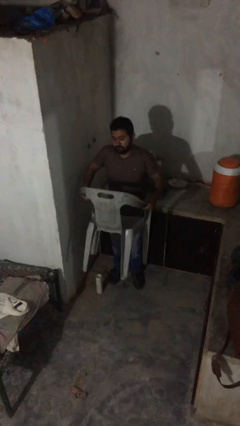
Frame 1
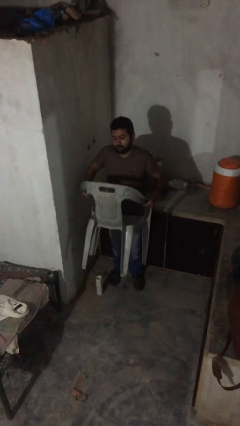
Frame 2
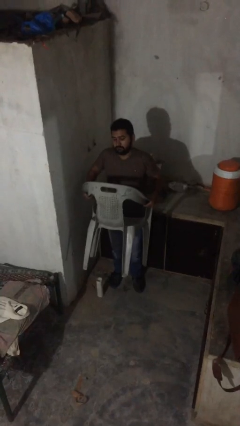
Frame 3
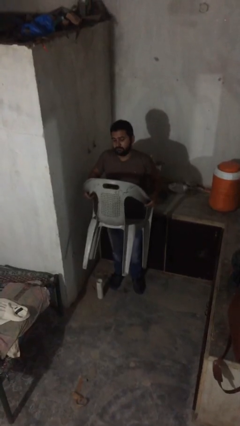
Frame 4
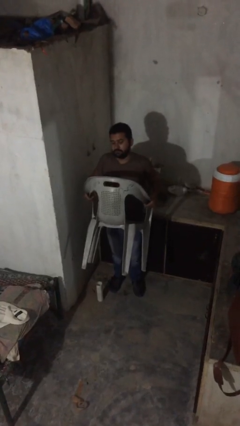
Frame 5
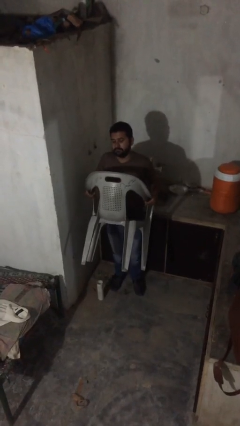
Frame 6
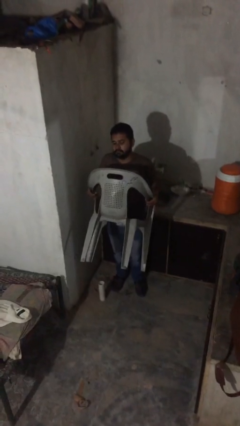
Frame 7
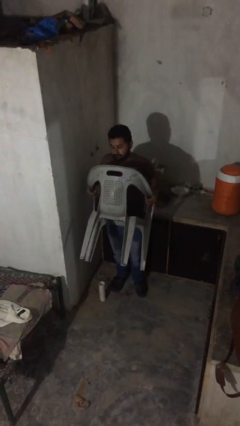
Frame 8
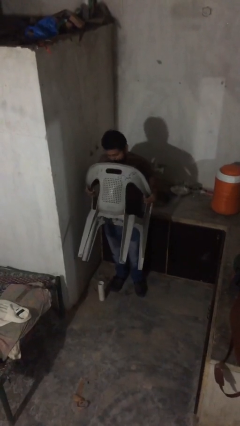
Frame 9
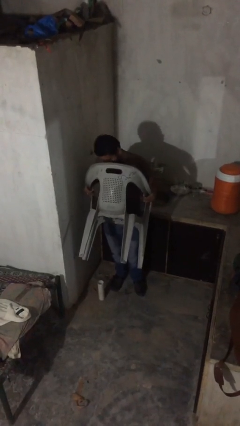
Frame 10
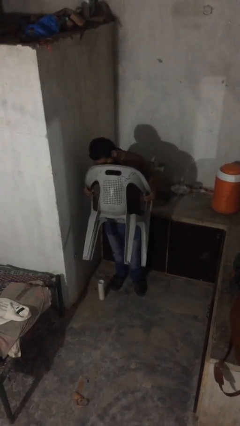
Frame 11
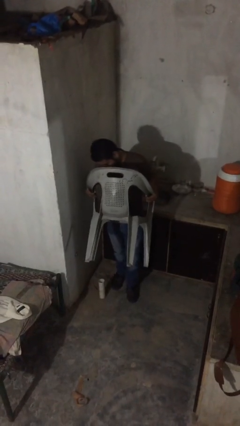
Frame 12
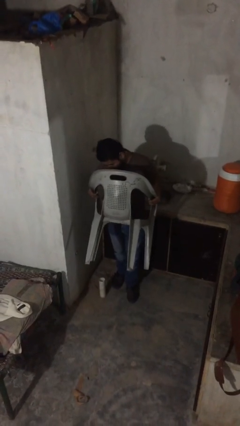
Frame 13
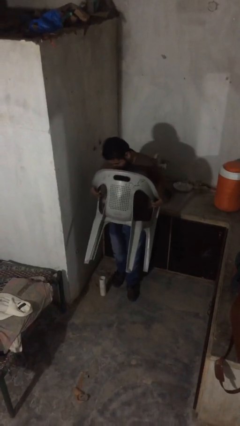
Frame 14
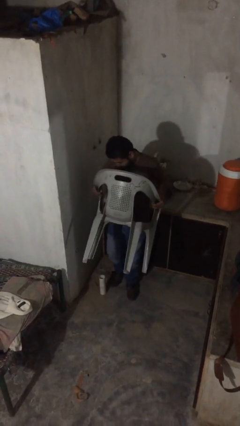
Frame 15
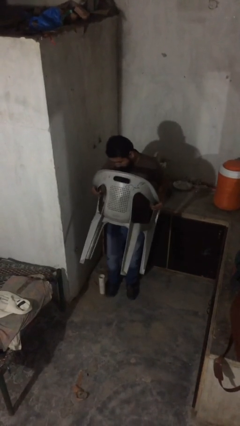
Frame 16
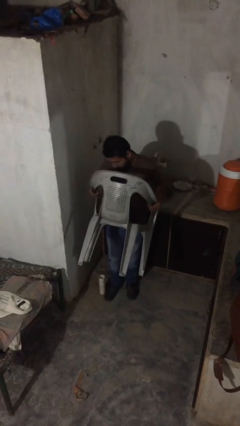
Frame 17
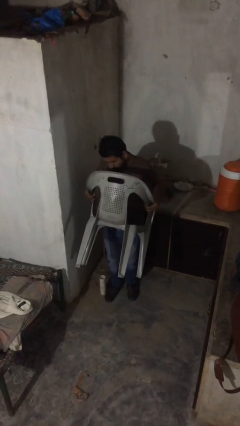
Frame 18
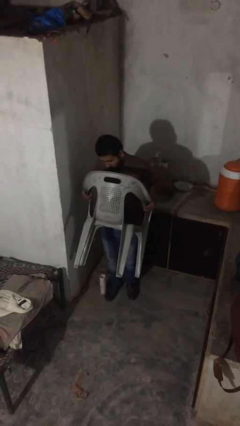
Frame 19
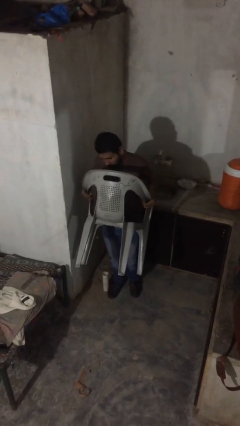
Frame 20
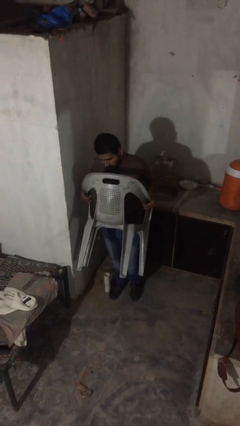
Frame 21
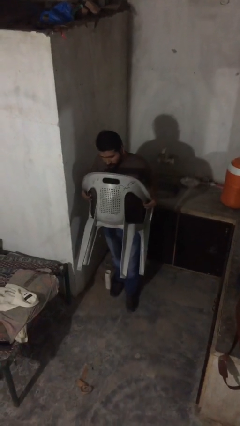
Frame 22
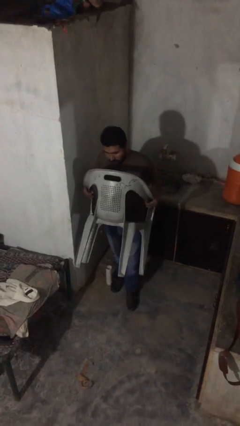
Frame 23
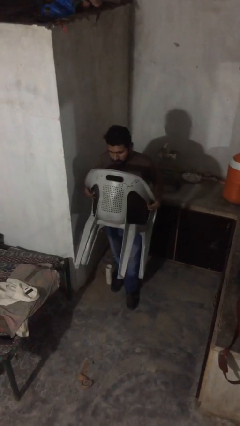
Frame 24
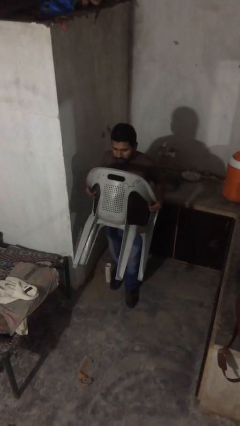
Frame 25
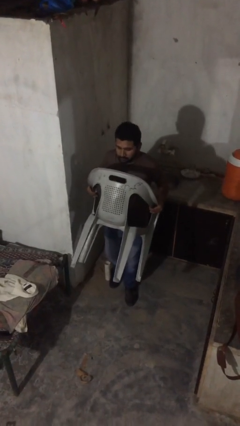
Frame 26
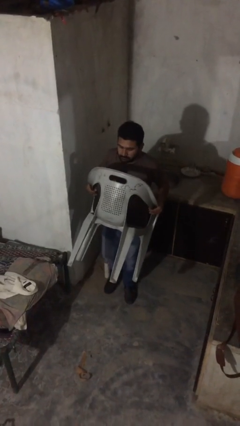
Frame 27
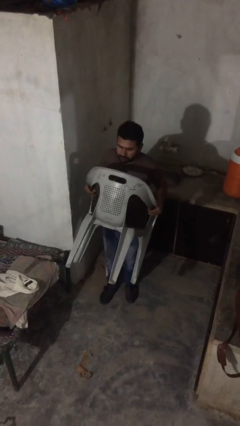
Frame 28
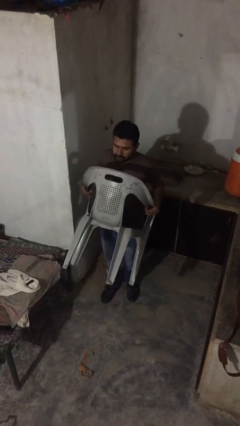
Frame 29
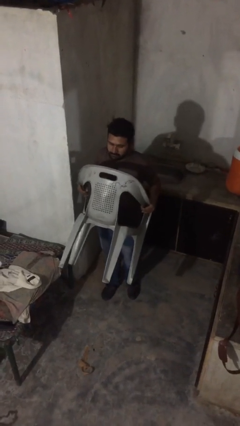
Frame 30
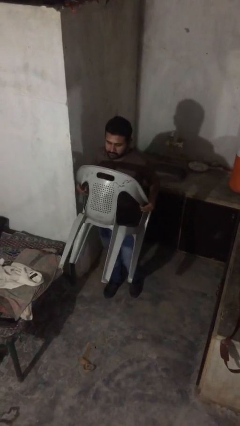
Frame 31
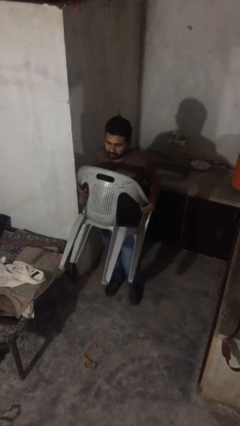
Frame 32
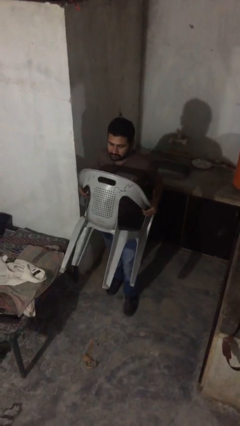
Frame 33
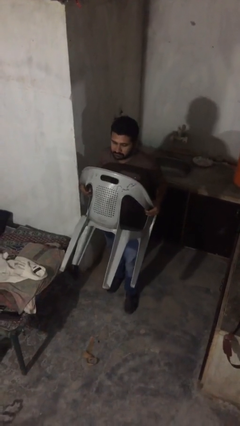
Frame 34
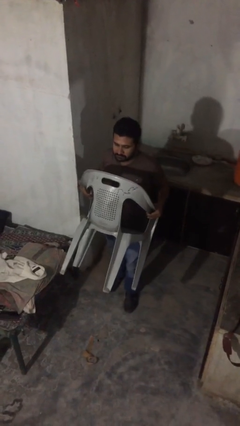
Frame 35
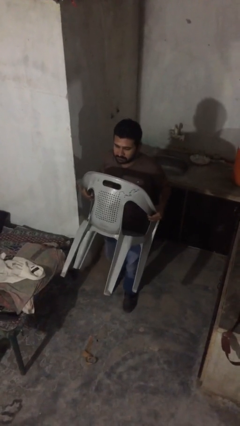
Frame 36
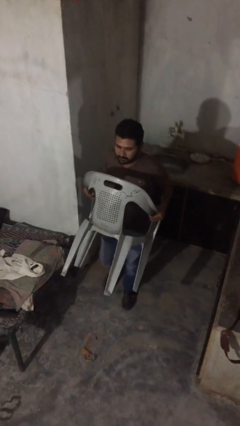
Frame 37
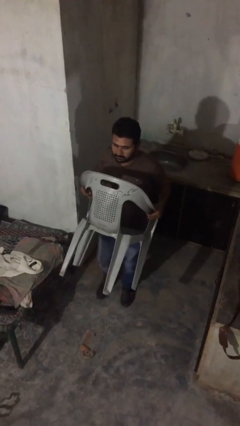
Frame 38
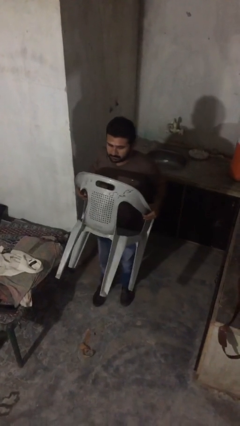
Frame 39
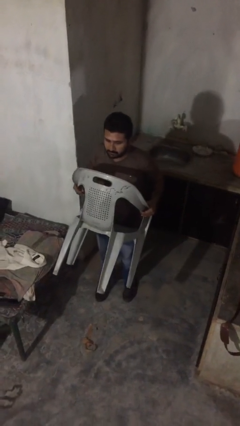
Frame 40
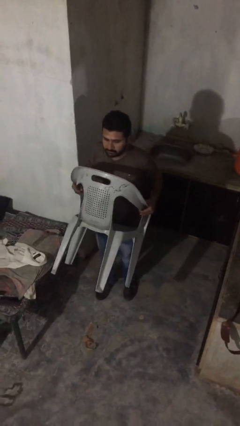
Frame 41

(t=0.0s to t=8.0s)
person carries heavy object

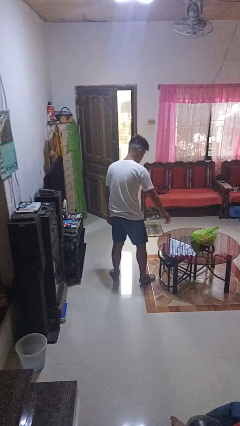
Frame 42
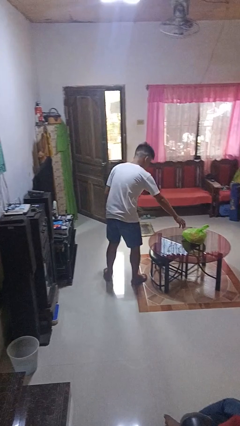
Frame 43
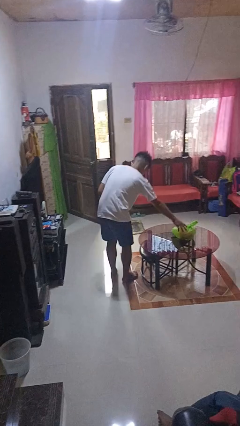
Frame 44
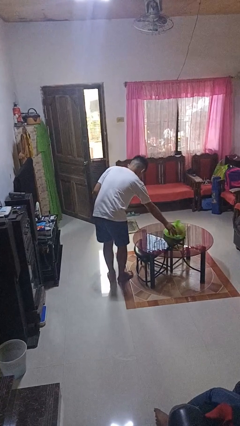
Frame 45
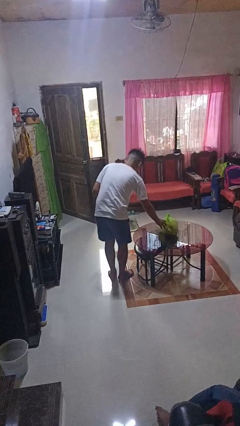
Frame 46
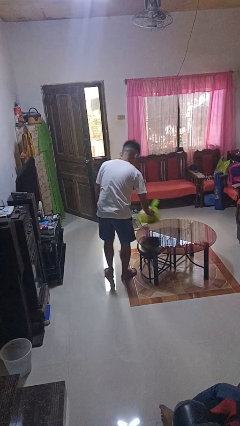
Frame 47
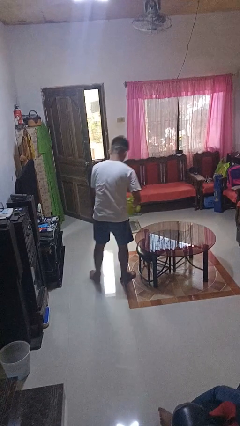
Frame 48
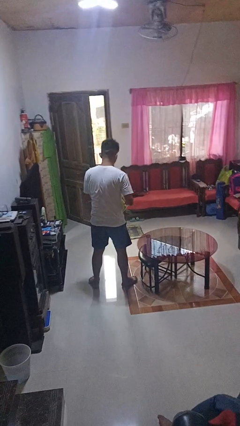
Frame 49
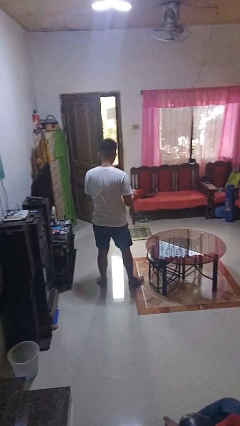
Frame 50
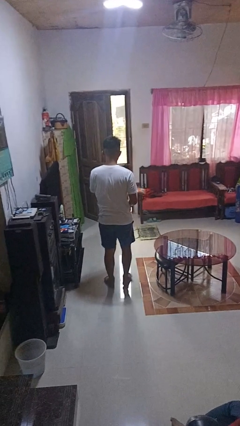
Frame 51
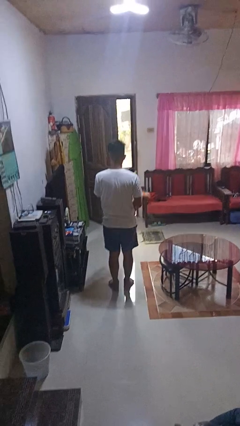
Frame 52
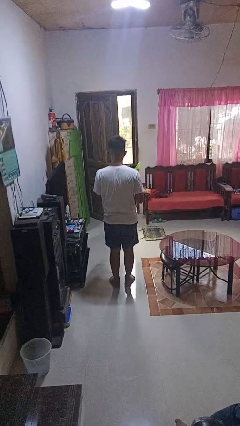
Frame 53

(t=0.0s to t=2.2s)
person picks up object from table

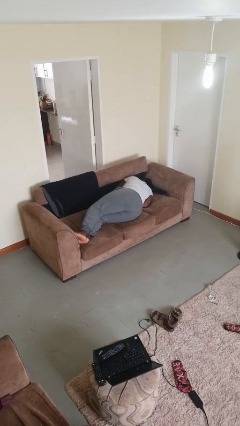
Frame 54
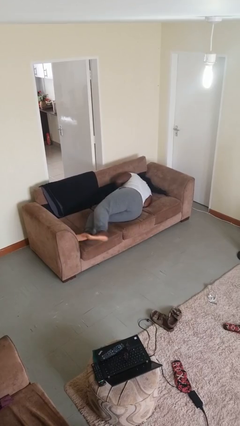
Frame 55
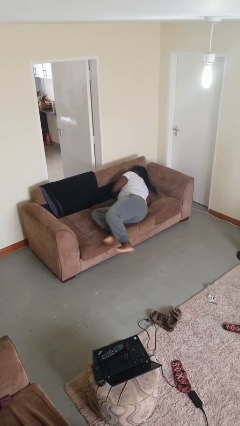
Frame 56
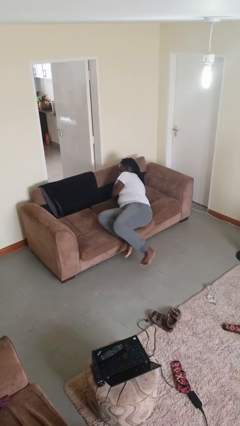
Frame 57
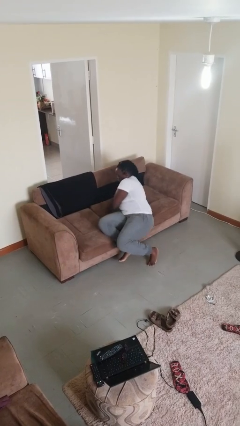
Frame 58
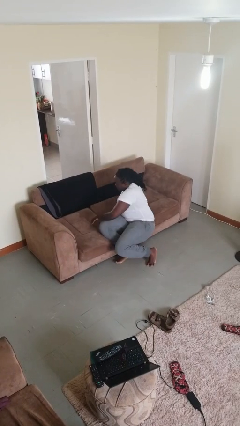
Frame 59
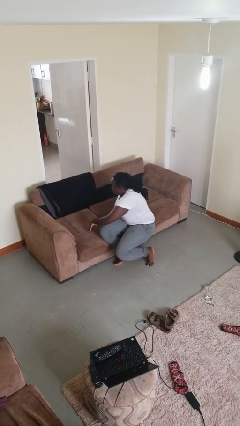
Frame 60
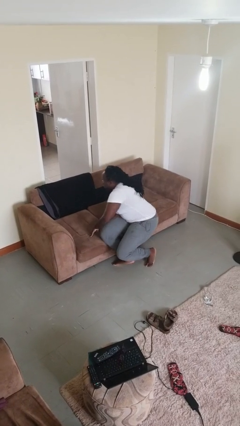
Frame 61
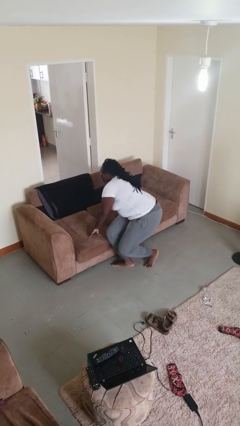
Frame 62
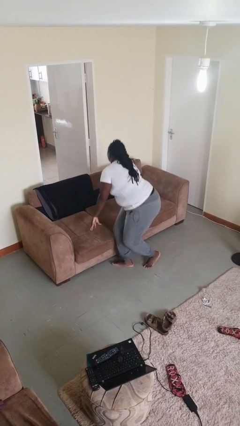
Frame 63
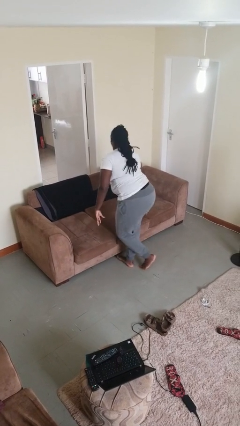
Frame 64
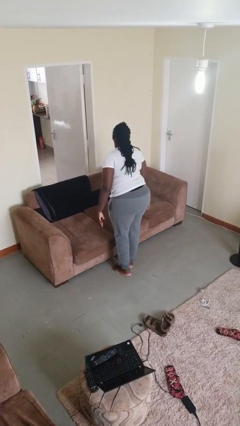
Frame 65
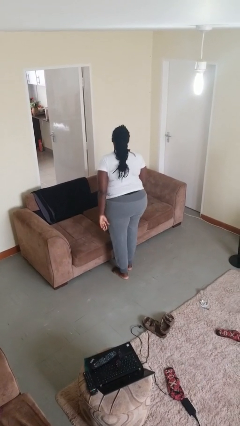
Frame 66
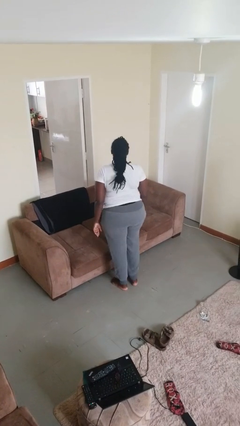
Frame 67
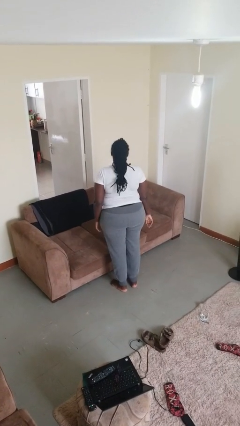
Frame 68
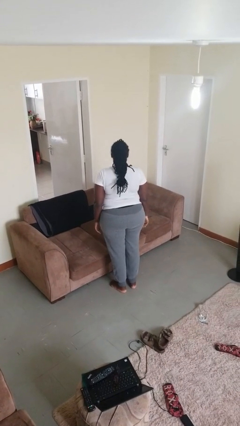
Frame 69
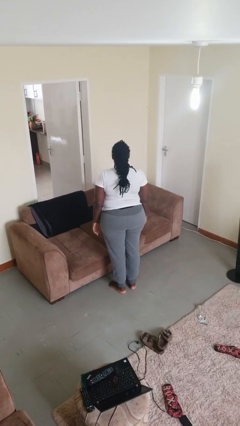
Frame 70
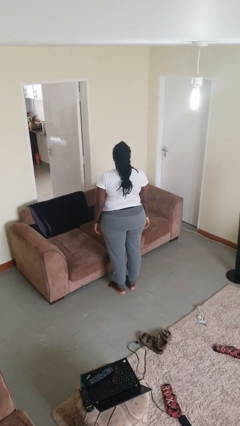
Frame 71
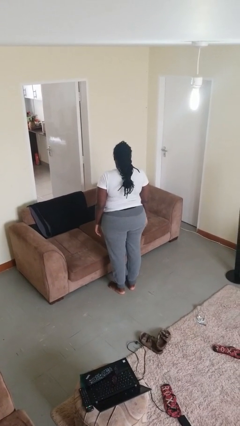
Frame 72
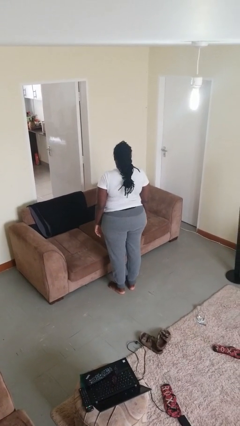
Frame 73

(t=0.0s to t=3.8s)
person stands up

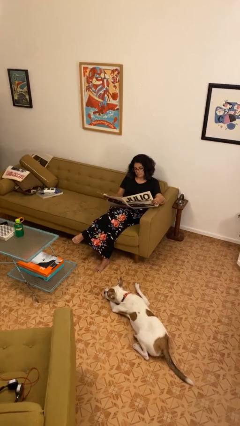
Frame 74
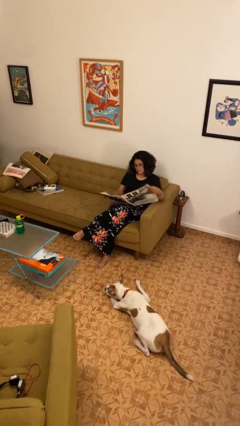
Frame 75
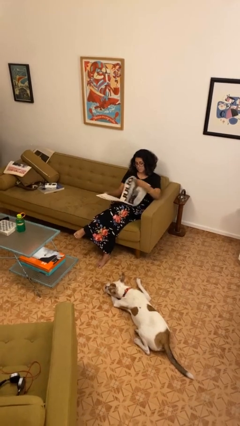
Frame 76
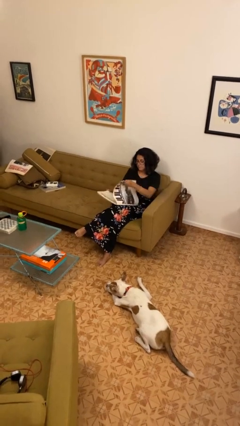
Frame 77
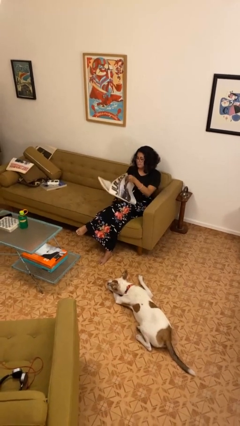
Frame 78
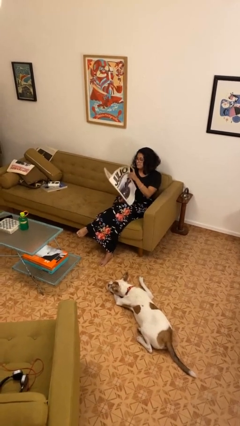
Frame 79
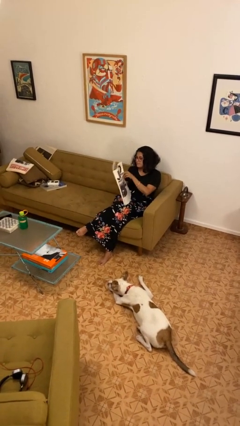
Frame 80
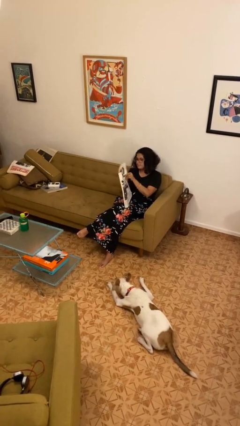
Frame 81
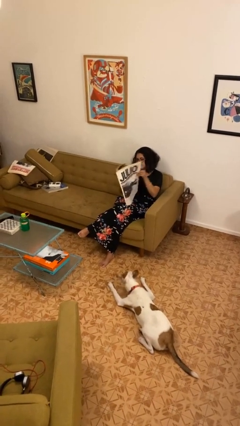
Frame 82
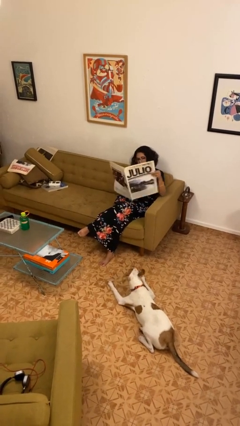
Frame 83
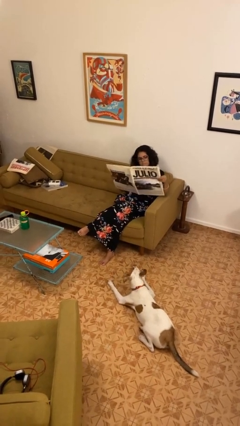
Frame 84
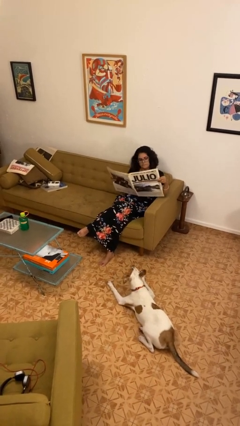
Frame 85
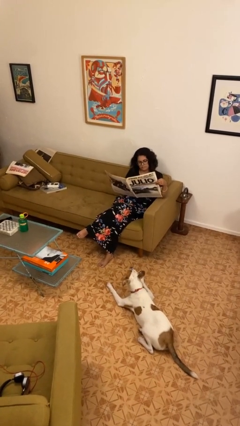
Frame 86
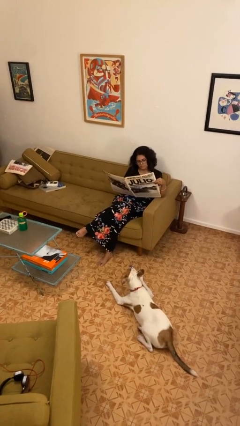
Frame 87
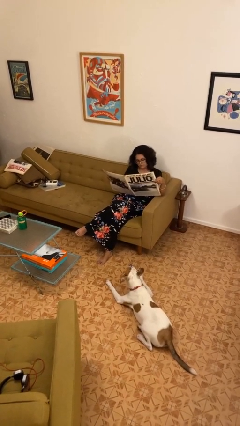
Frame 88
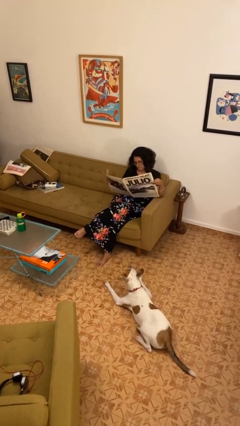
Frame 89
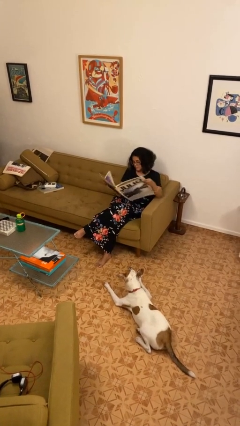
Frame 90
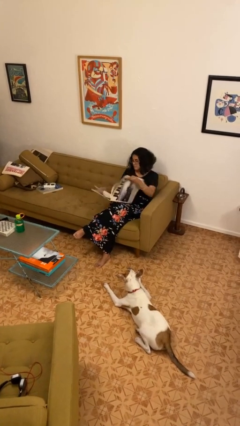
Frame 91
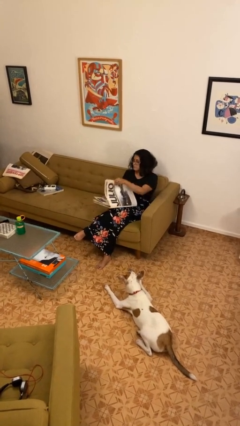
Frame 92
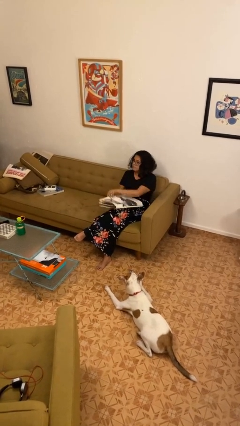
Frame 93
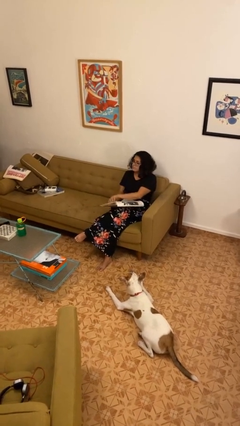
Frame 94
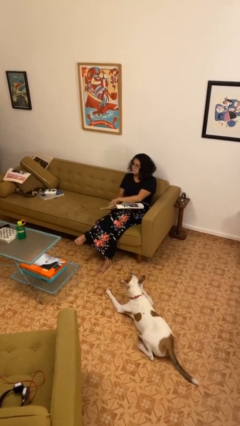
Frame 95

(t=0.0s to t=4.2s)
person reads newspaper
